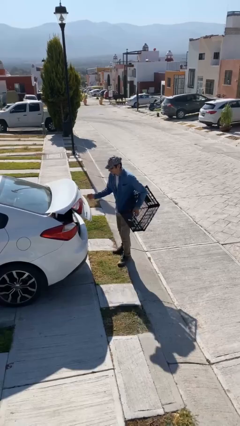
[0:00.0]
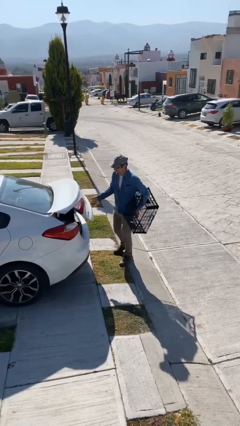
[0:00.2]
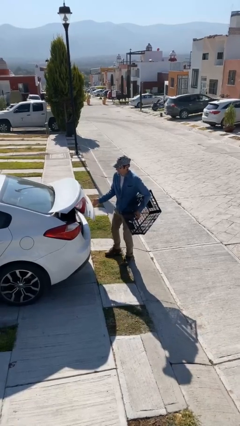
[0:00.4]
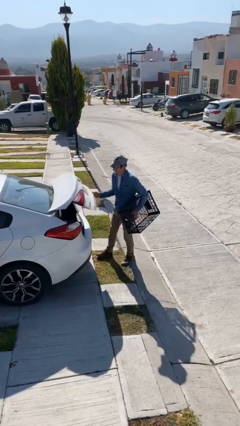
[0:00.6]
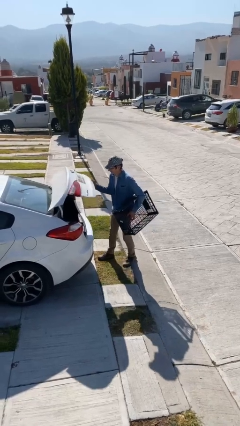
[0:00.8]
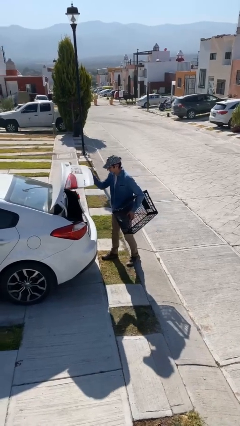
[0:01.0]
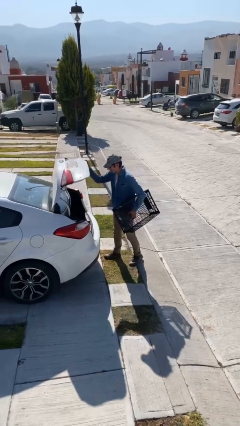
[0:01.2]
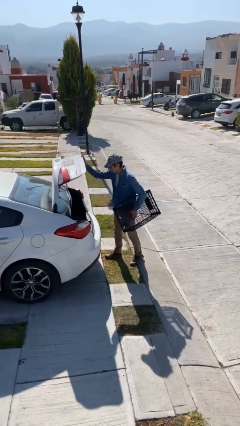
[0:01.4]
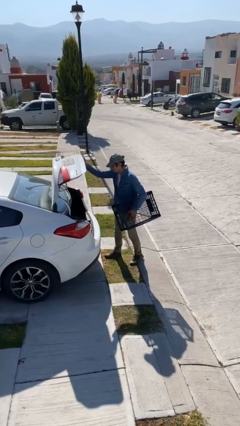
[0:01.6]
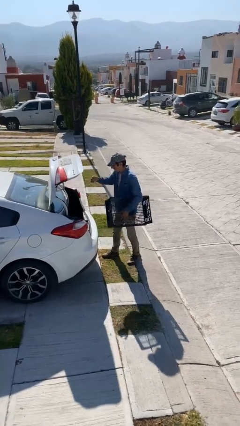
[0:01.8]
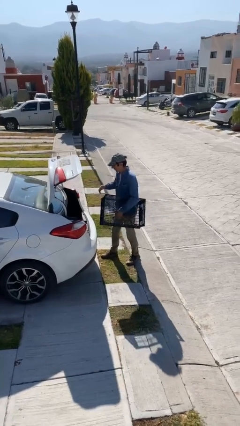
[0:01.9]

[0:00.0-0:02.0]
person opens car trunk

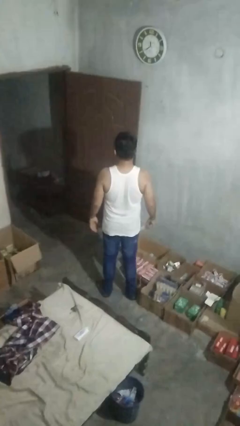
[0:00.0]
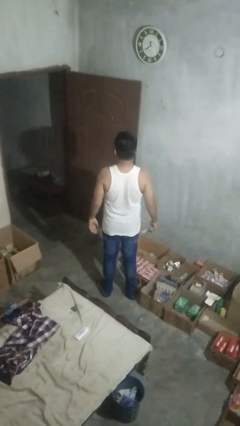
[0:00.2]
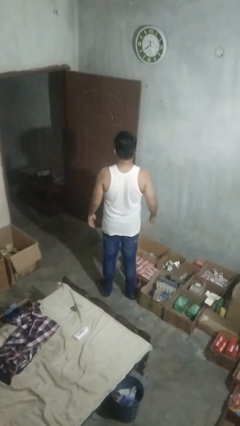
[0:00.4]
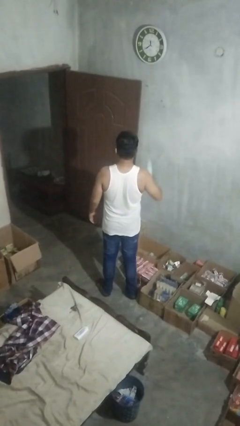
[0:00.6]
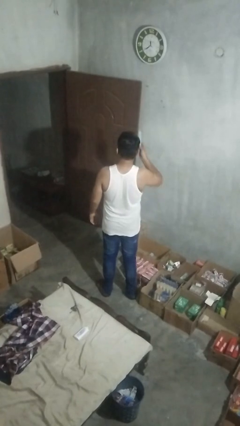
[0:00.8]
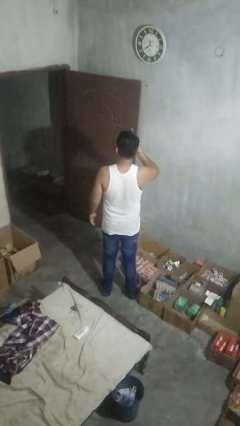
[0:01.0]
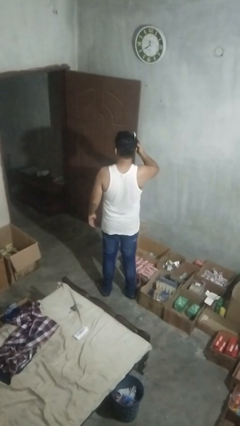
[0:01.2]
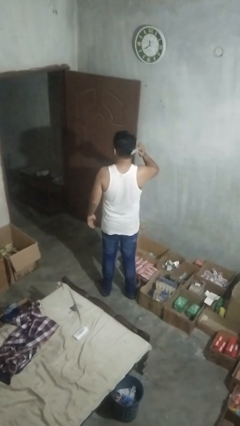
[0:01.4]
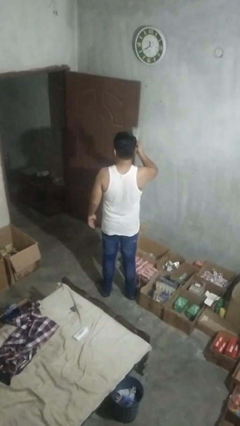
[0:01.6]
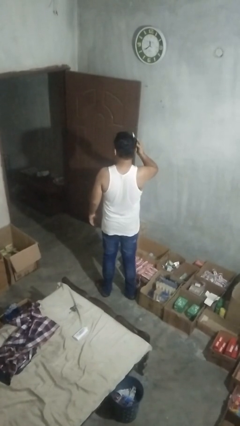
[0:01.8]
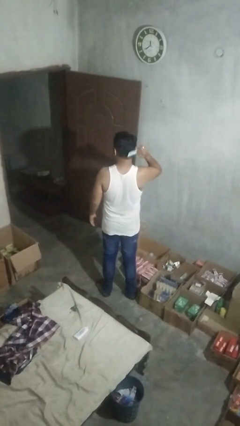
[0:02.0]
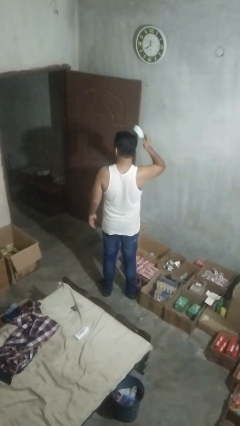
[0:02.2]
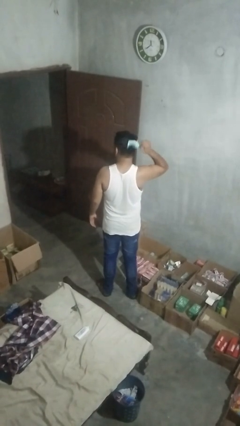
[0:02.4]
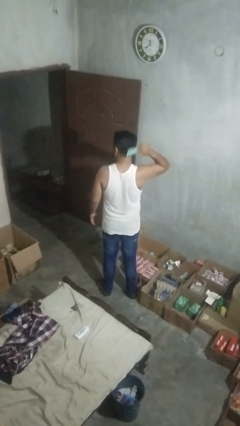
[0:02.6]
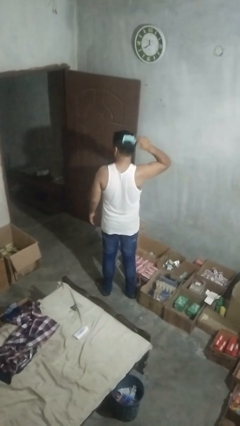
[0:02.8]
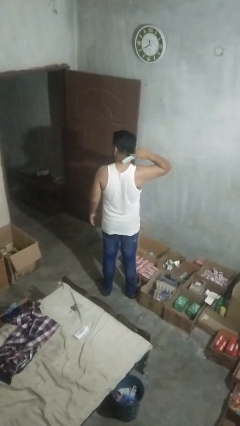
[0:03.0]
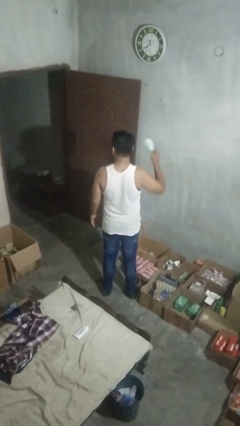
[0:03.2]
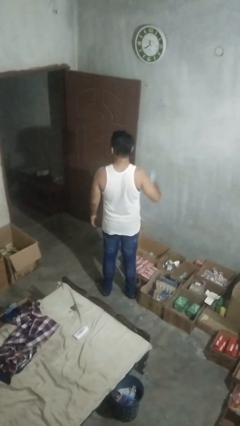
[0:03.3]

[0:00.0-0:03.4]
person brushes hair

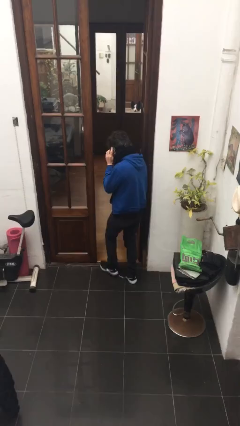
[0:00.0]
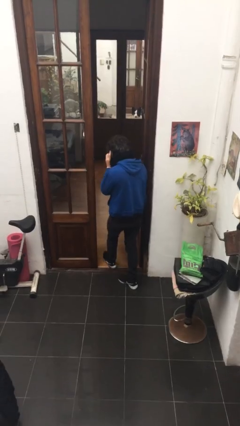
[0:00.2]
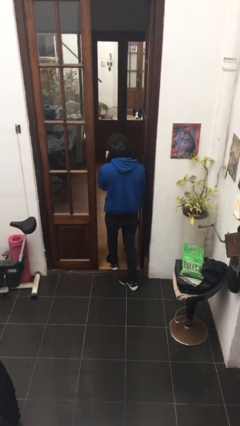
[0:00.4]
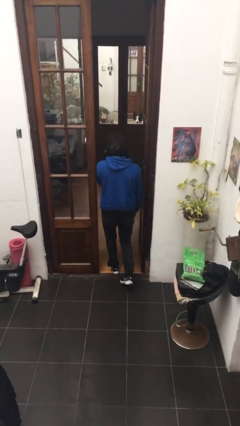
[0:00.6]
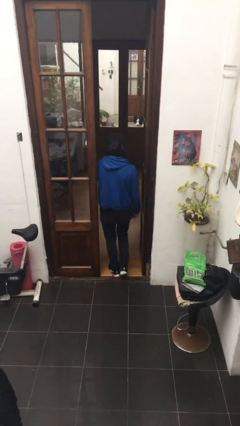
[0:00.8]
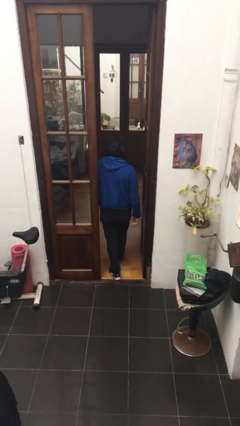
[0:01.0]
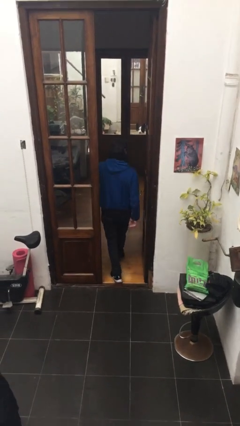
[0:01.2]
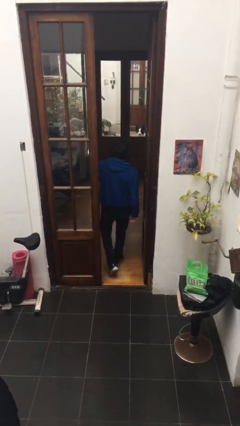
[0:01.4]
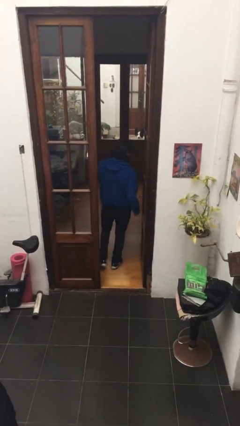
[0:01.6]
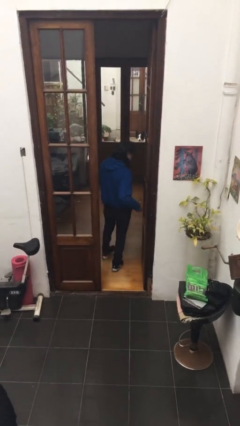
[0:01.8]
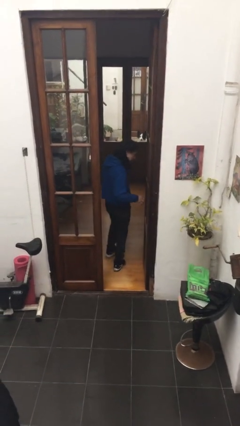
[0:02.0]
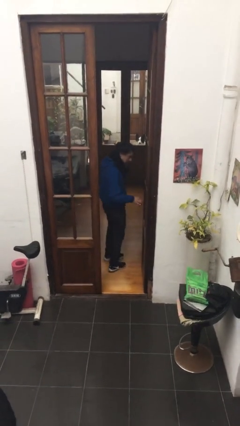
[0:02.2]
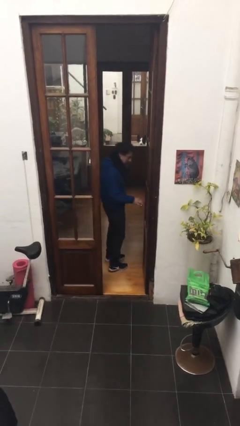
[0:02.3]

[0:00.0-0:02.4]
person exits scene through structure

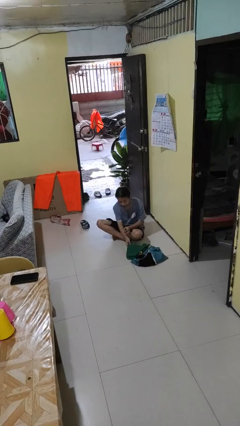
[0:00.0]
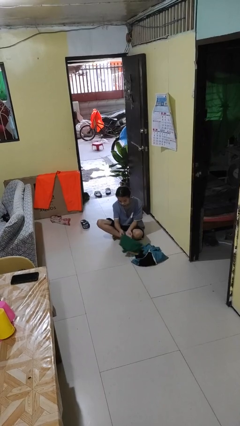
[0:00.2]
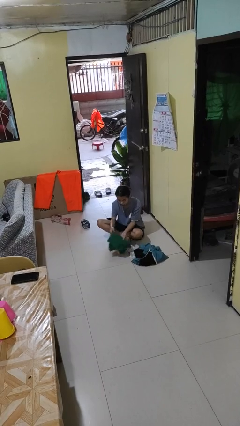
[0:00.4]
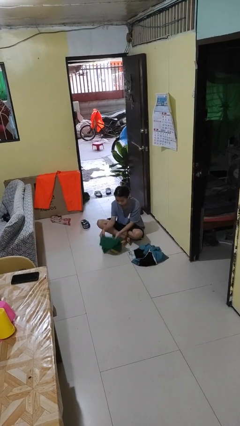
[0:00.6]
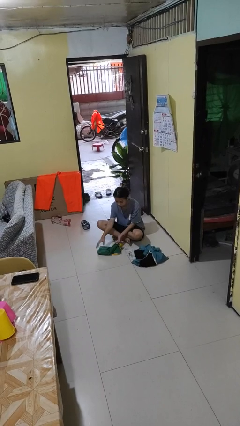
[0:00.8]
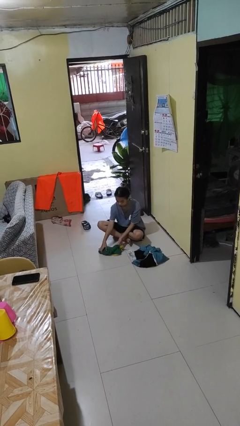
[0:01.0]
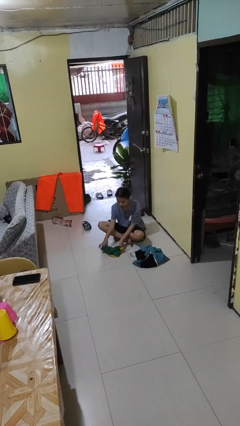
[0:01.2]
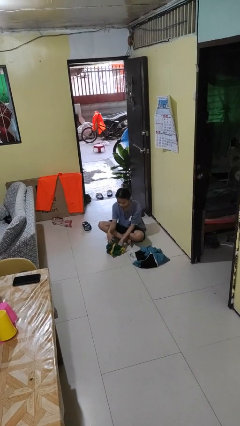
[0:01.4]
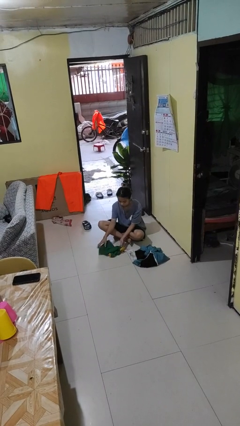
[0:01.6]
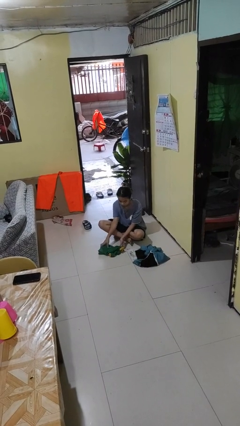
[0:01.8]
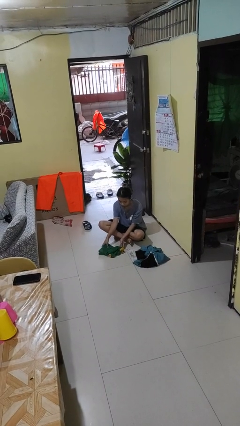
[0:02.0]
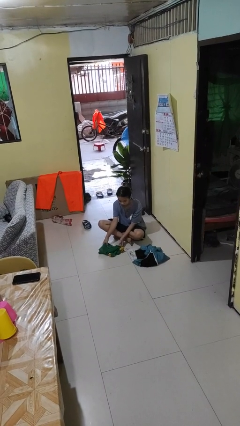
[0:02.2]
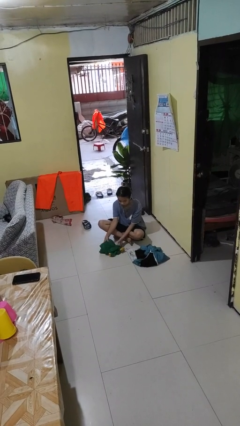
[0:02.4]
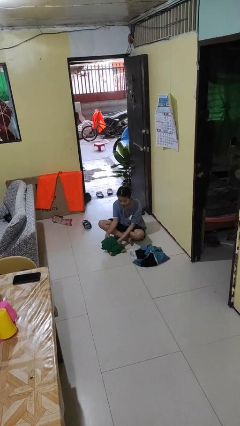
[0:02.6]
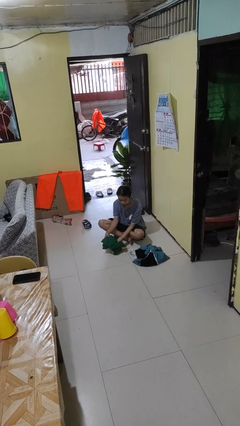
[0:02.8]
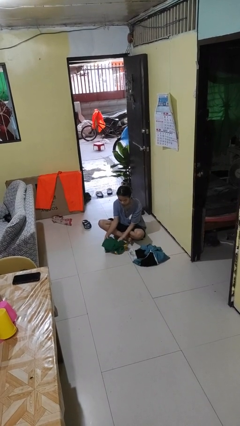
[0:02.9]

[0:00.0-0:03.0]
person folds shirt

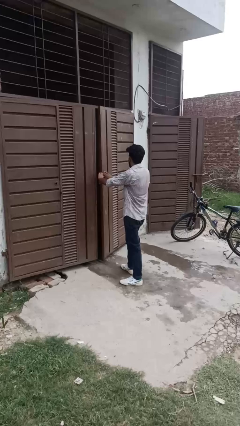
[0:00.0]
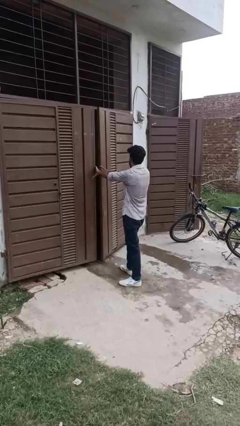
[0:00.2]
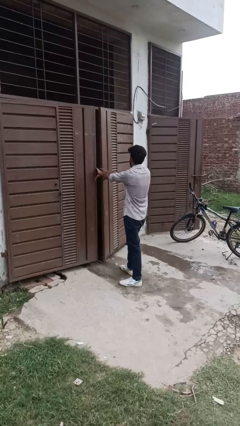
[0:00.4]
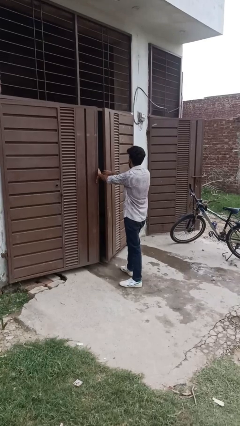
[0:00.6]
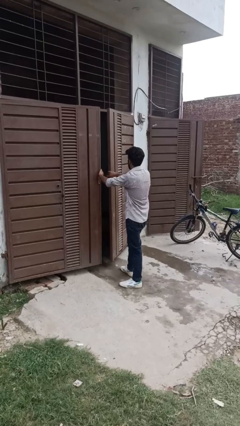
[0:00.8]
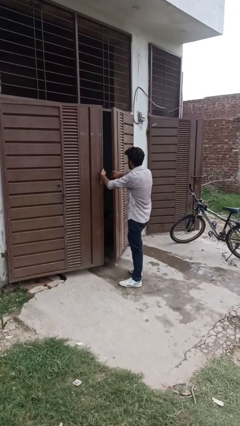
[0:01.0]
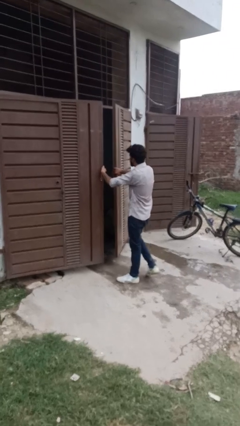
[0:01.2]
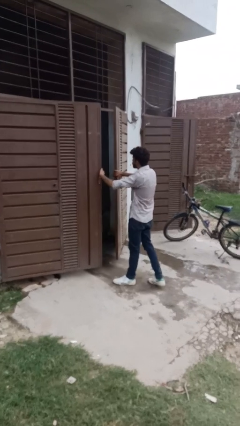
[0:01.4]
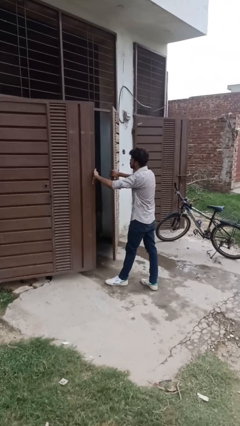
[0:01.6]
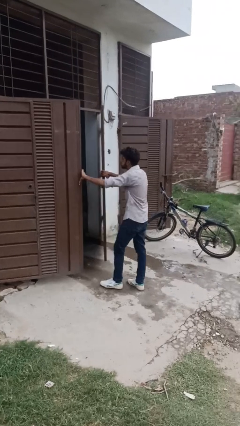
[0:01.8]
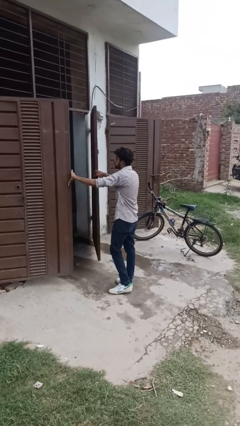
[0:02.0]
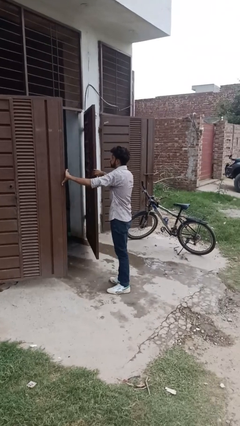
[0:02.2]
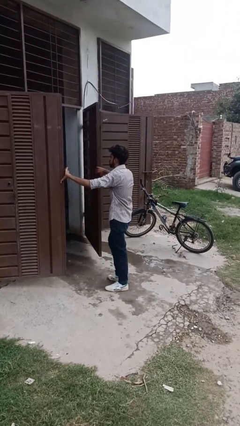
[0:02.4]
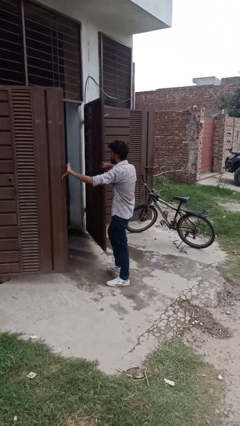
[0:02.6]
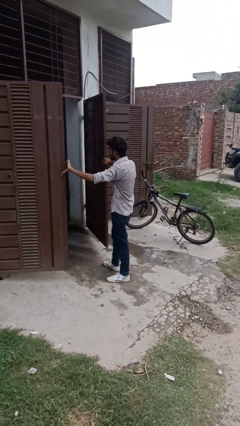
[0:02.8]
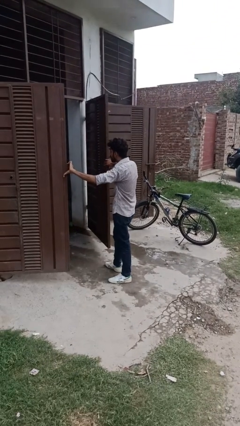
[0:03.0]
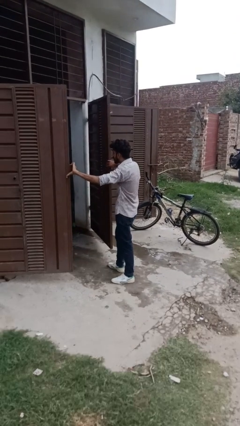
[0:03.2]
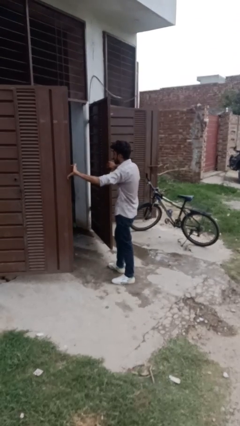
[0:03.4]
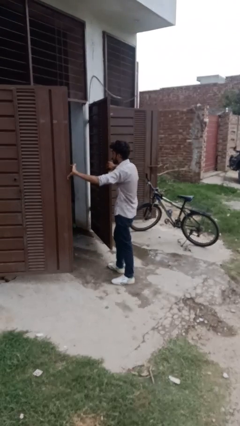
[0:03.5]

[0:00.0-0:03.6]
person opens gate

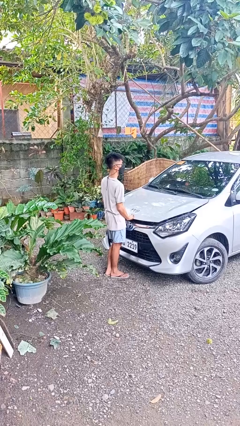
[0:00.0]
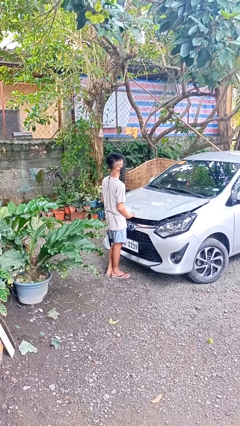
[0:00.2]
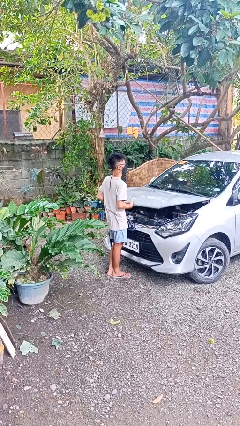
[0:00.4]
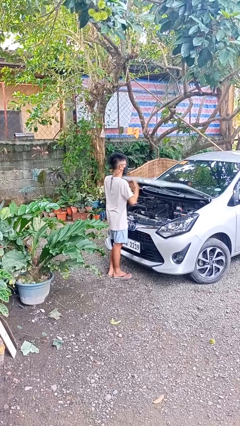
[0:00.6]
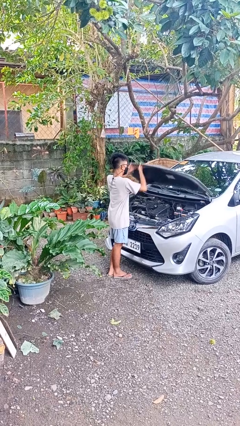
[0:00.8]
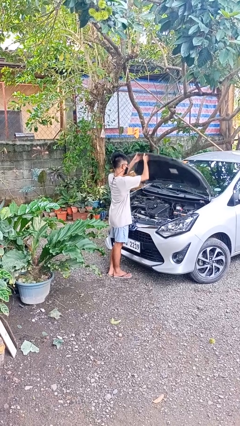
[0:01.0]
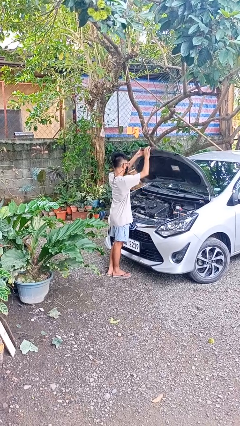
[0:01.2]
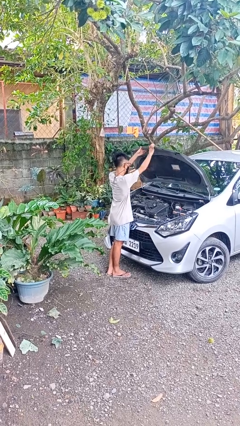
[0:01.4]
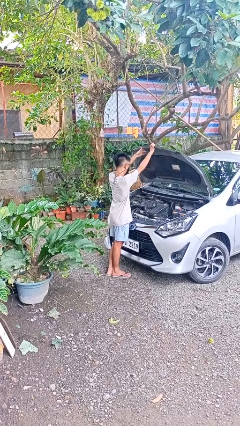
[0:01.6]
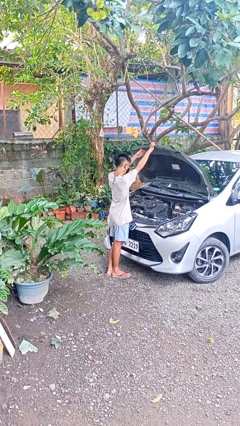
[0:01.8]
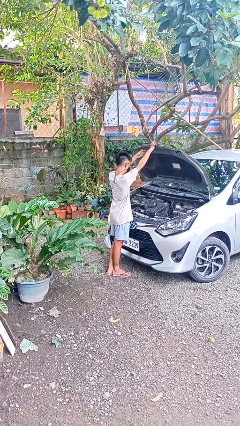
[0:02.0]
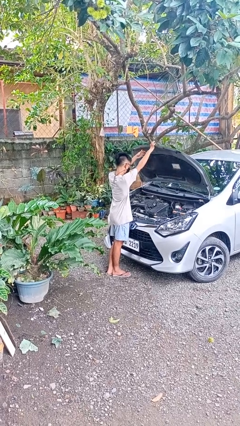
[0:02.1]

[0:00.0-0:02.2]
person opens car hood

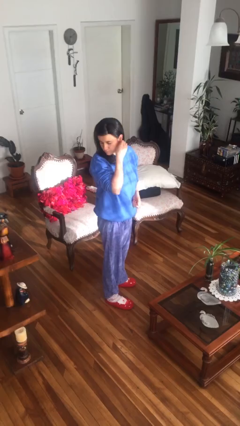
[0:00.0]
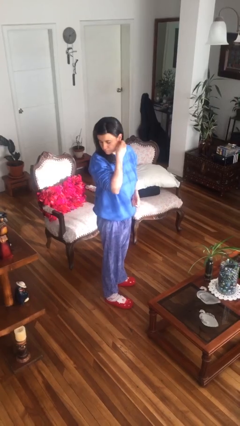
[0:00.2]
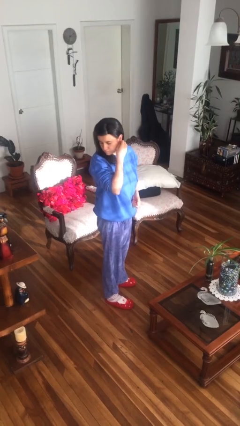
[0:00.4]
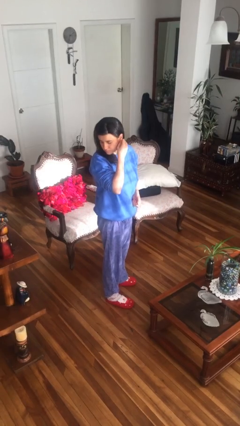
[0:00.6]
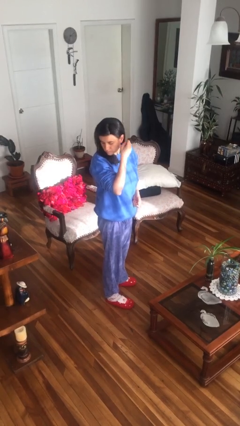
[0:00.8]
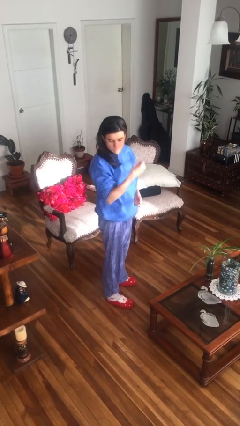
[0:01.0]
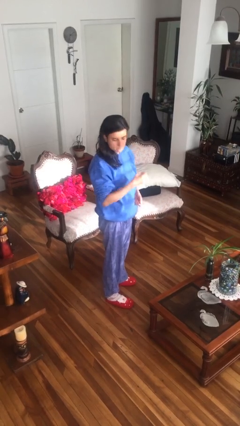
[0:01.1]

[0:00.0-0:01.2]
person takes off earrings
